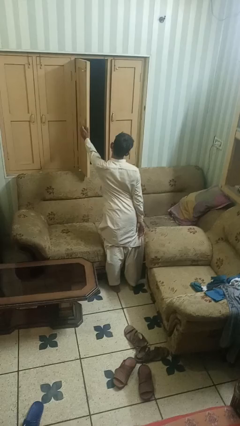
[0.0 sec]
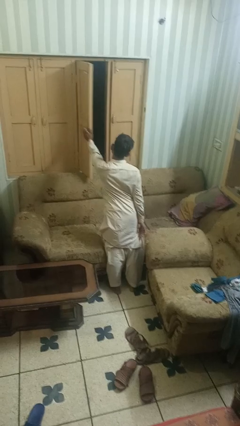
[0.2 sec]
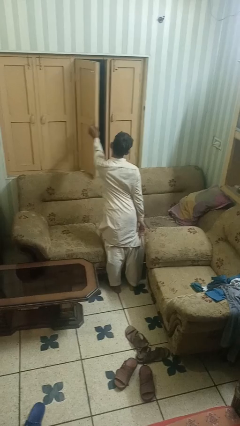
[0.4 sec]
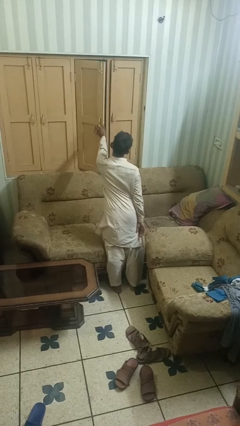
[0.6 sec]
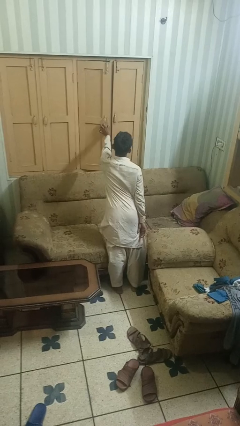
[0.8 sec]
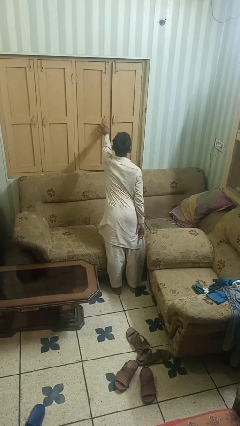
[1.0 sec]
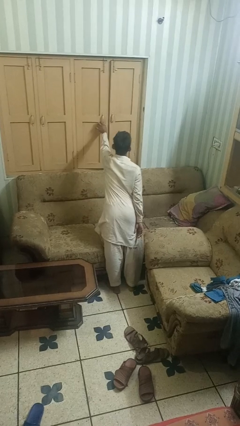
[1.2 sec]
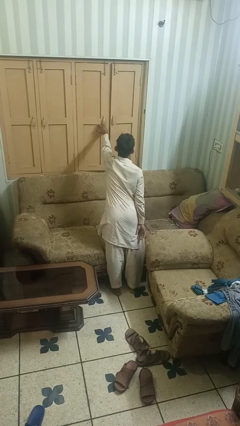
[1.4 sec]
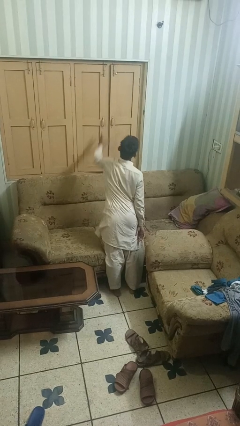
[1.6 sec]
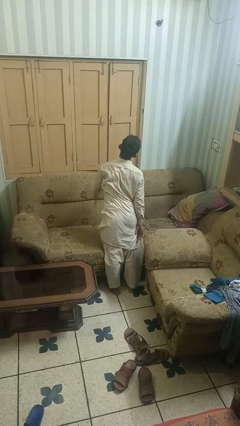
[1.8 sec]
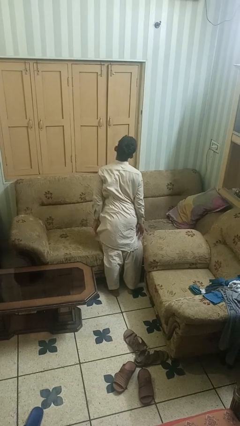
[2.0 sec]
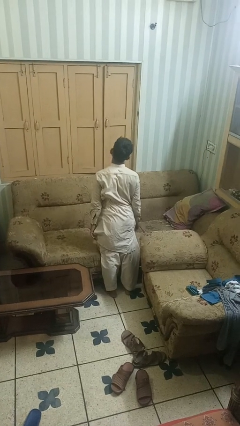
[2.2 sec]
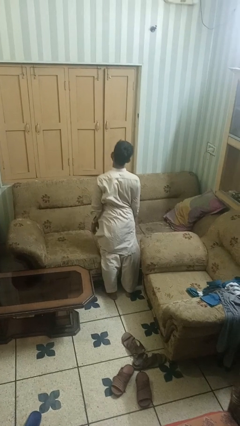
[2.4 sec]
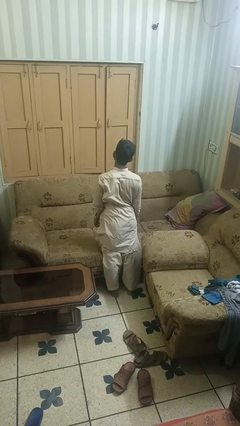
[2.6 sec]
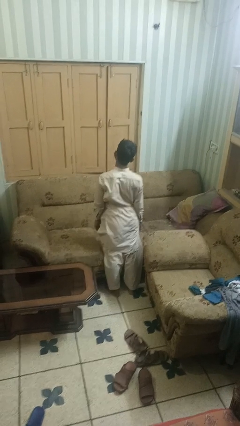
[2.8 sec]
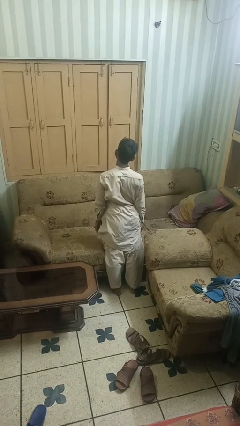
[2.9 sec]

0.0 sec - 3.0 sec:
person closes home window

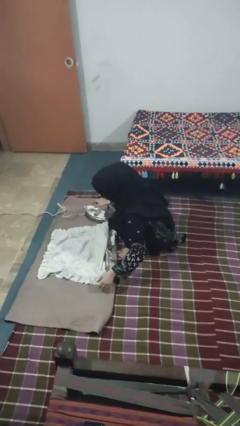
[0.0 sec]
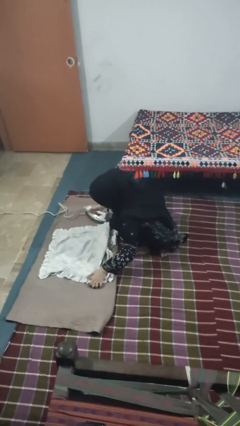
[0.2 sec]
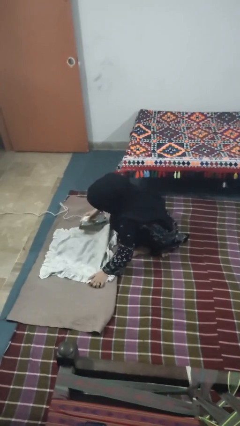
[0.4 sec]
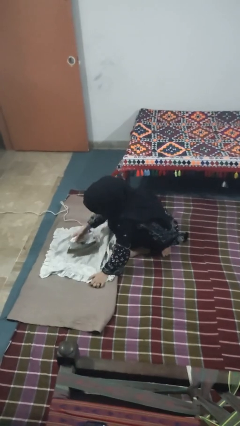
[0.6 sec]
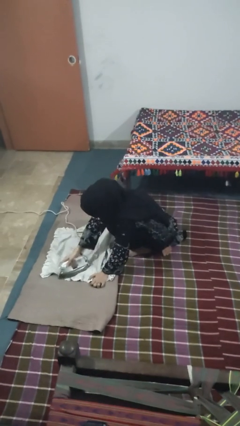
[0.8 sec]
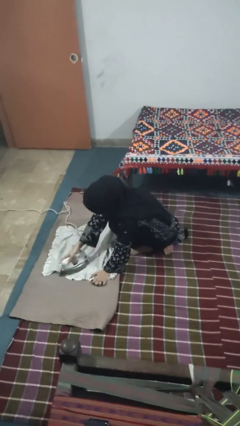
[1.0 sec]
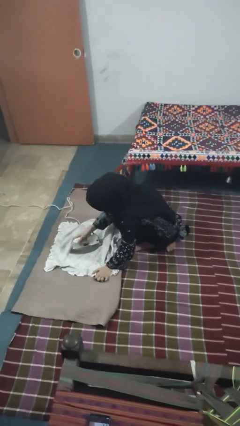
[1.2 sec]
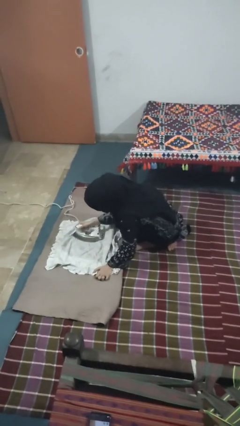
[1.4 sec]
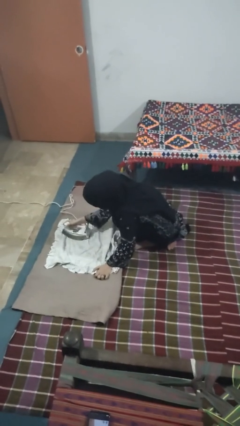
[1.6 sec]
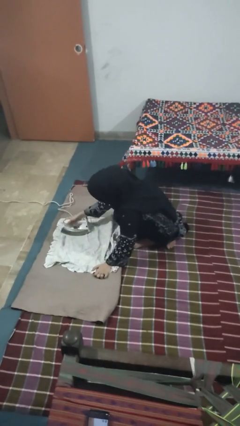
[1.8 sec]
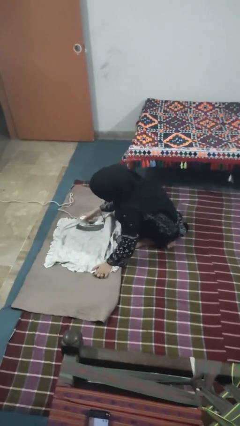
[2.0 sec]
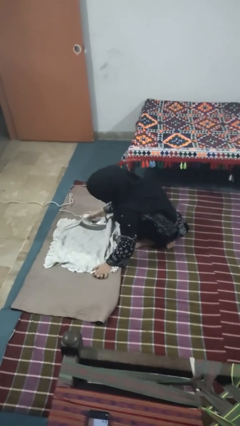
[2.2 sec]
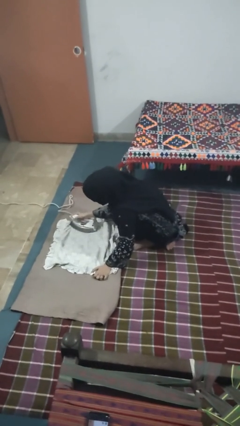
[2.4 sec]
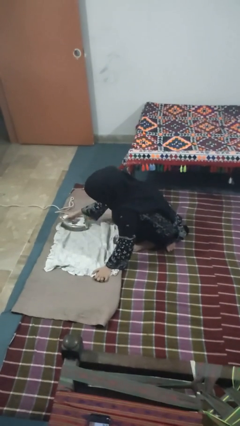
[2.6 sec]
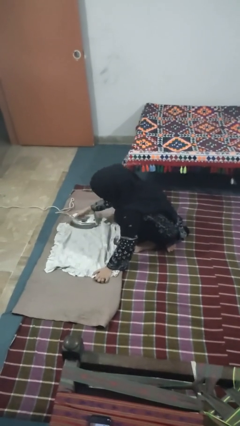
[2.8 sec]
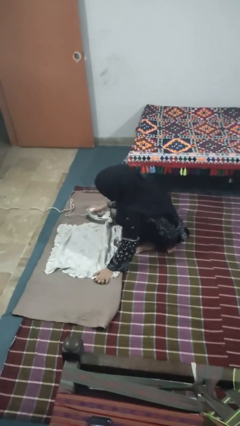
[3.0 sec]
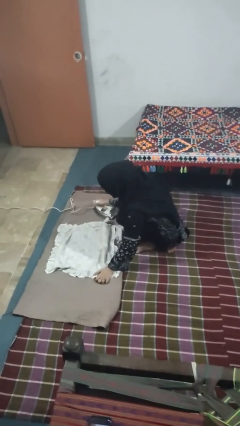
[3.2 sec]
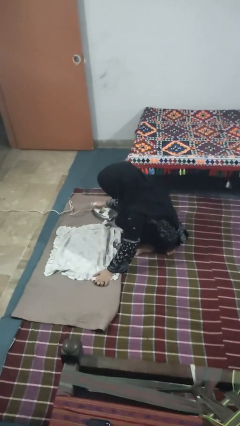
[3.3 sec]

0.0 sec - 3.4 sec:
person irons clothes

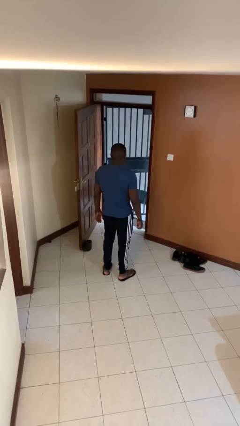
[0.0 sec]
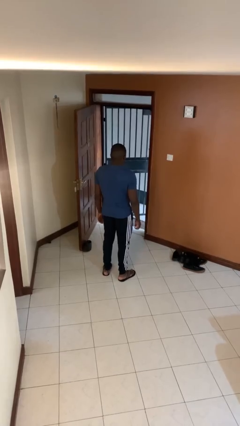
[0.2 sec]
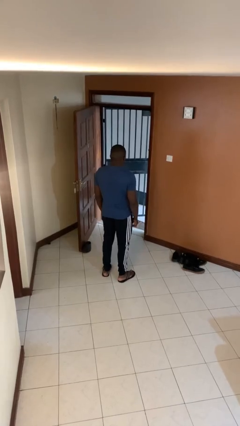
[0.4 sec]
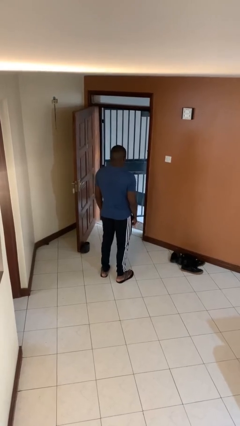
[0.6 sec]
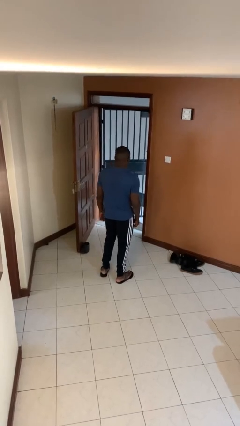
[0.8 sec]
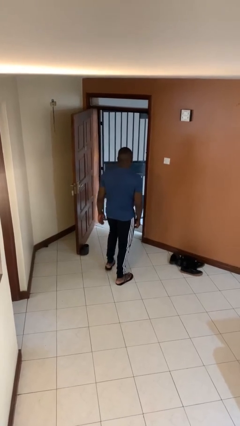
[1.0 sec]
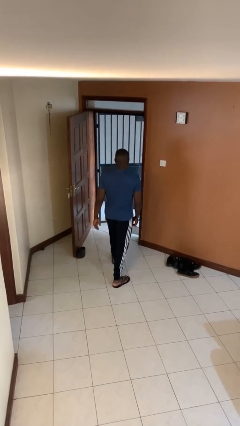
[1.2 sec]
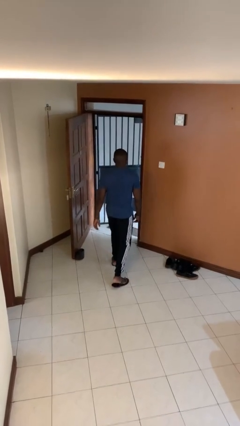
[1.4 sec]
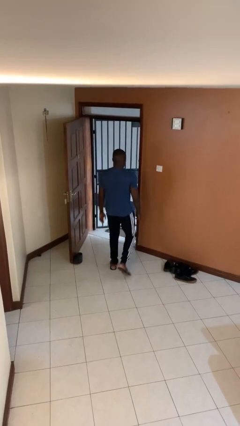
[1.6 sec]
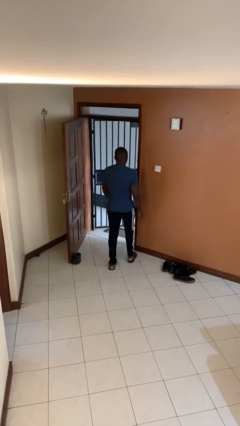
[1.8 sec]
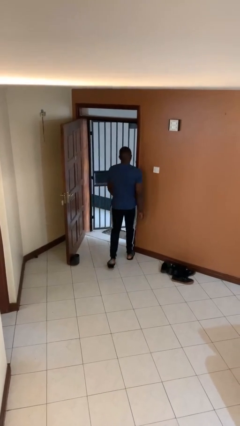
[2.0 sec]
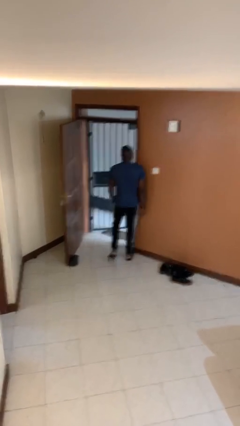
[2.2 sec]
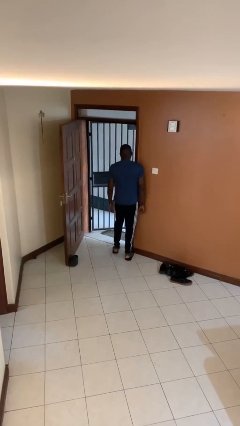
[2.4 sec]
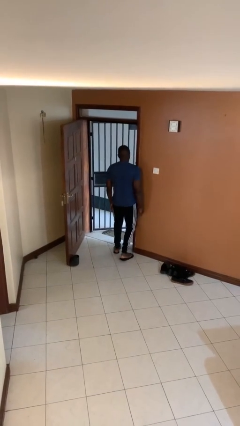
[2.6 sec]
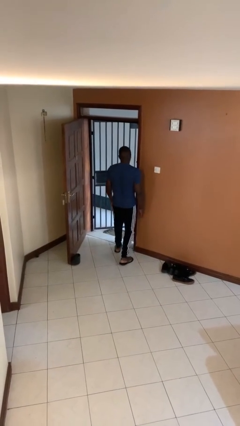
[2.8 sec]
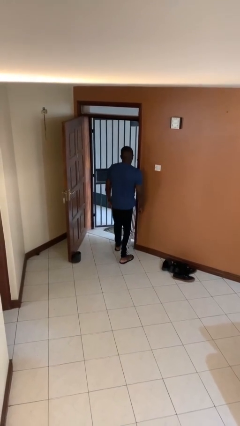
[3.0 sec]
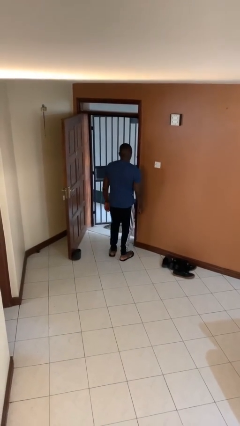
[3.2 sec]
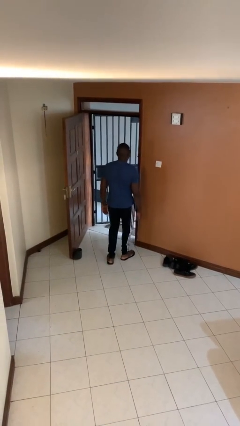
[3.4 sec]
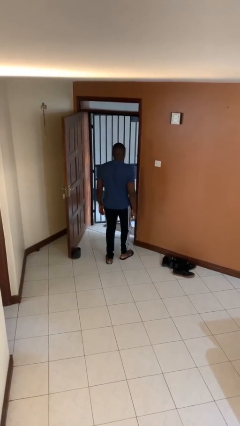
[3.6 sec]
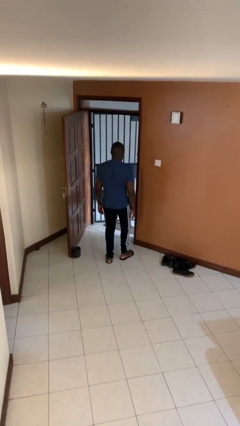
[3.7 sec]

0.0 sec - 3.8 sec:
person bumps into wall

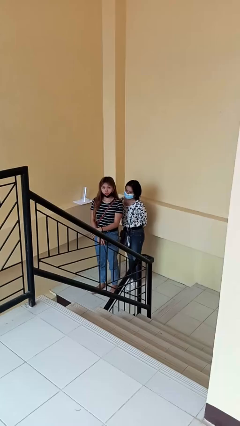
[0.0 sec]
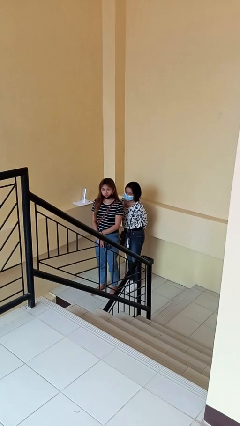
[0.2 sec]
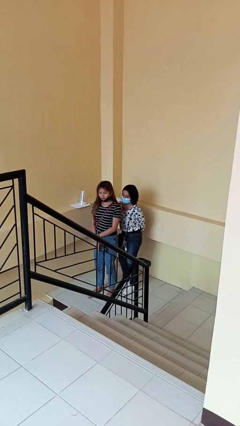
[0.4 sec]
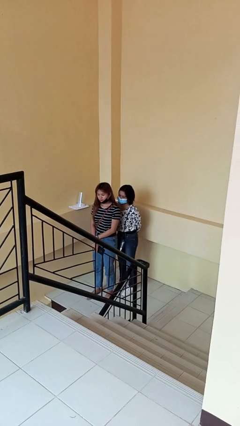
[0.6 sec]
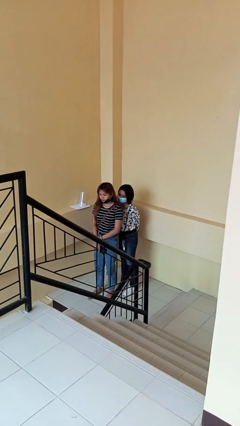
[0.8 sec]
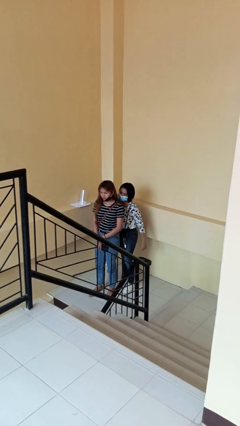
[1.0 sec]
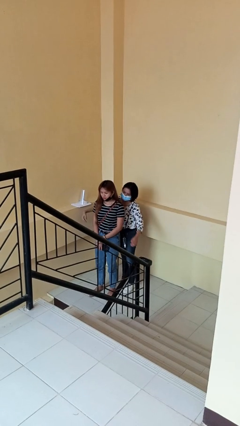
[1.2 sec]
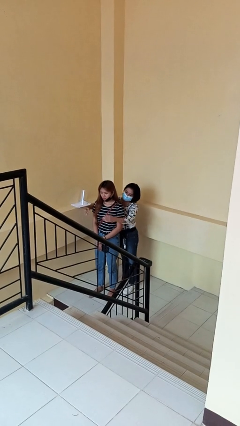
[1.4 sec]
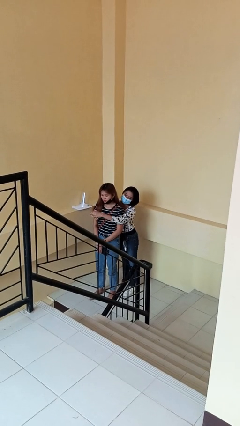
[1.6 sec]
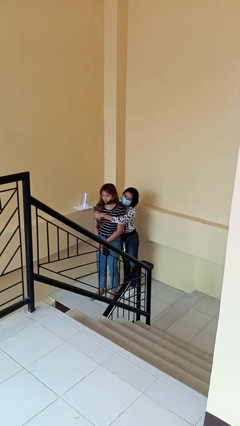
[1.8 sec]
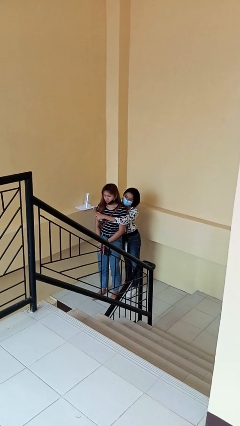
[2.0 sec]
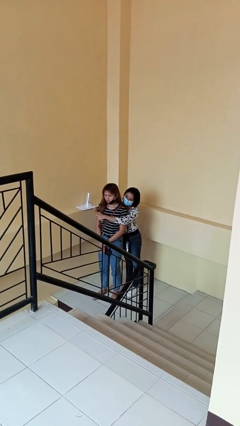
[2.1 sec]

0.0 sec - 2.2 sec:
person hugs person from behind

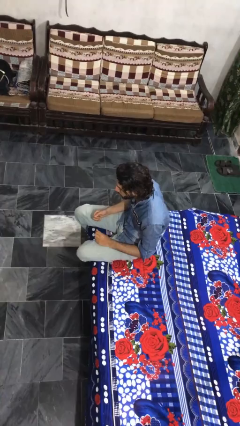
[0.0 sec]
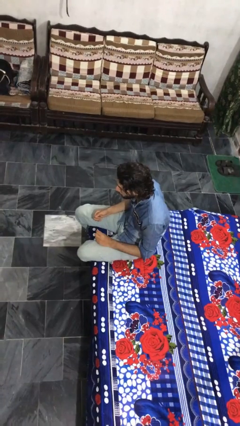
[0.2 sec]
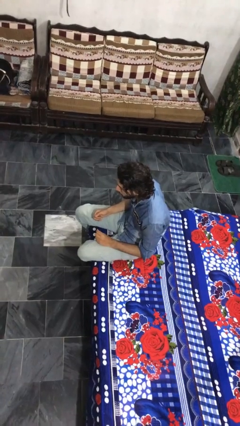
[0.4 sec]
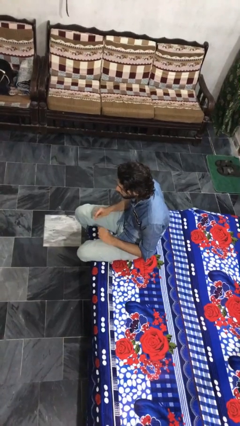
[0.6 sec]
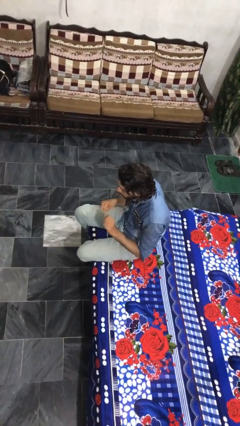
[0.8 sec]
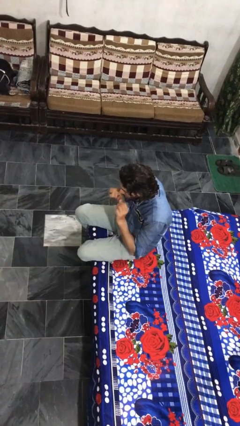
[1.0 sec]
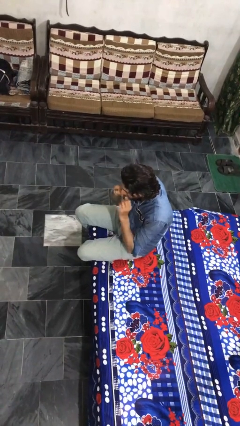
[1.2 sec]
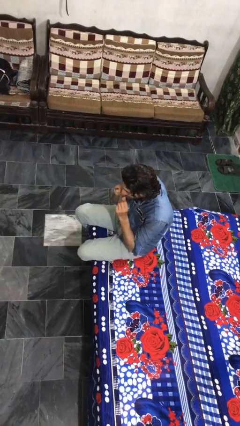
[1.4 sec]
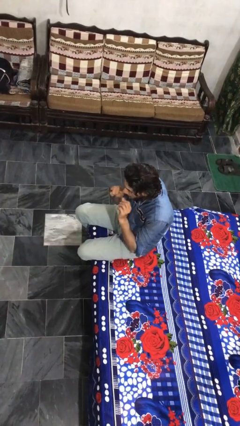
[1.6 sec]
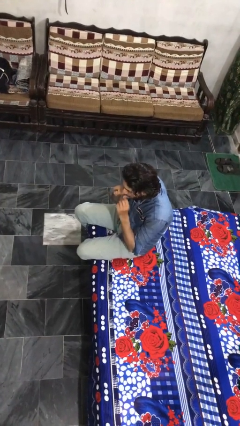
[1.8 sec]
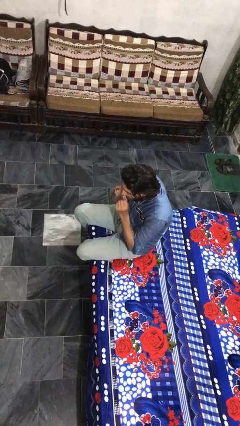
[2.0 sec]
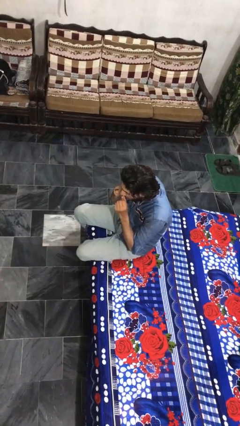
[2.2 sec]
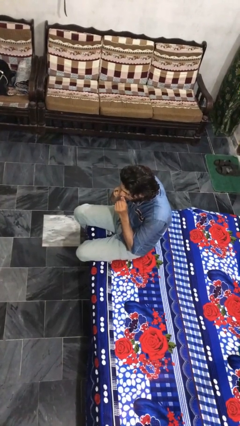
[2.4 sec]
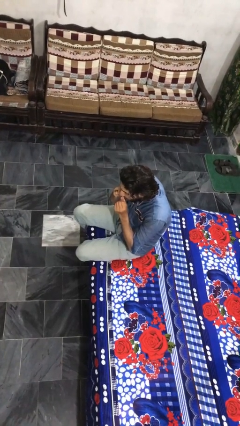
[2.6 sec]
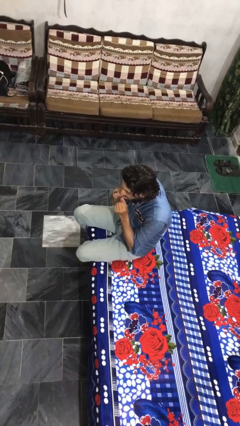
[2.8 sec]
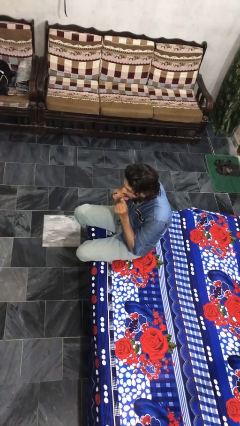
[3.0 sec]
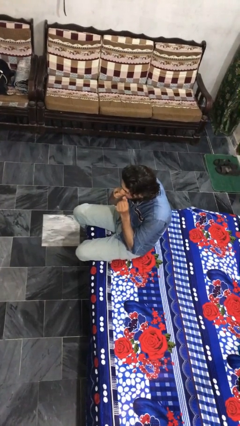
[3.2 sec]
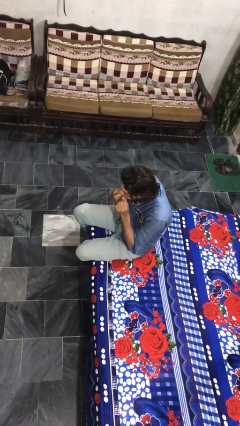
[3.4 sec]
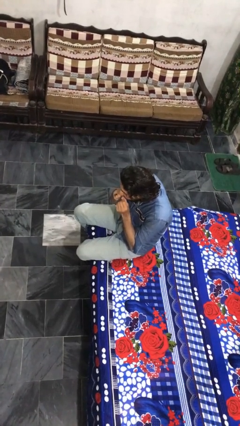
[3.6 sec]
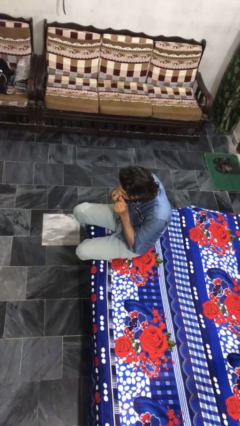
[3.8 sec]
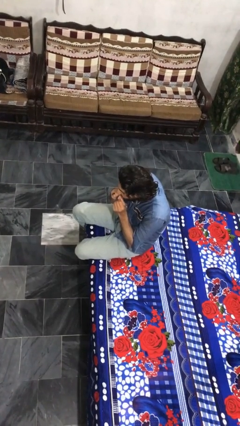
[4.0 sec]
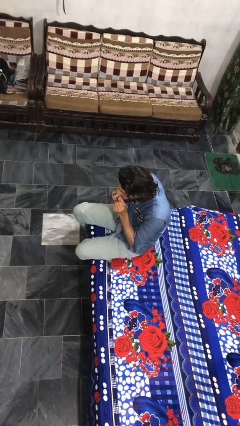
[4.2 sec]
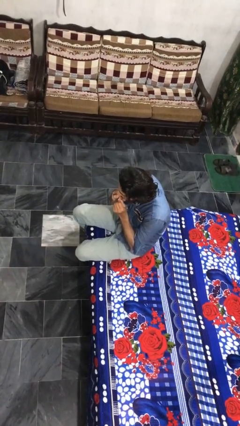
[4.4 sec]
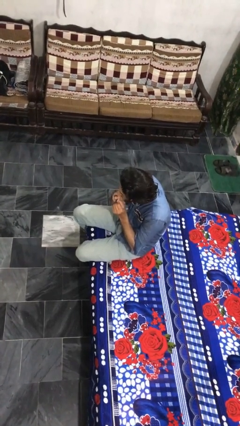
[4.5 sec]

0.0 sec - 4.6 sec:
person flosses

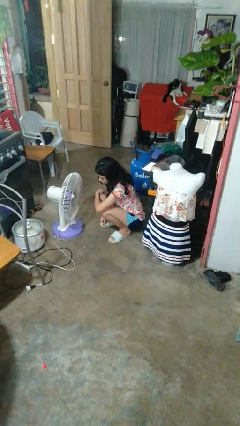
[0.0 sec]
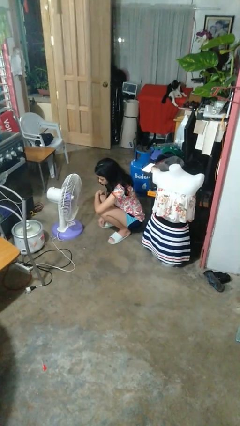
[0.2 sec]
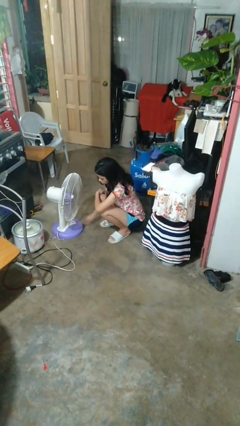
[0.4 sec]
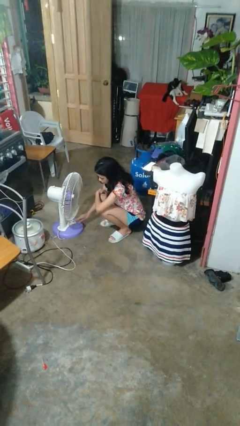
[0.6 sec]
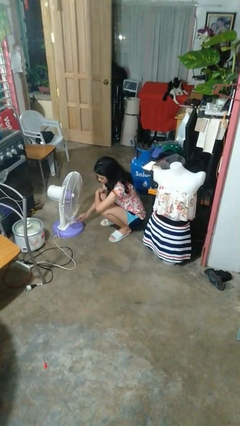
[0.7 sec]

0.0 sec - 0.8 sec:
person turns off fan

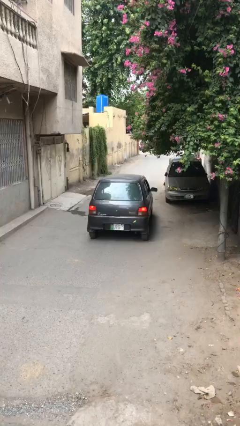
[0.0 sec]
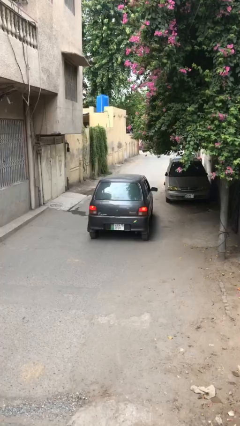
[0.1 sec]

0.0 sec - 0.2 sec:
car drops off person
